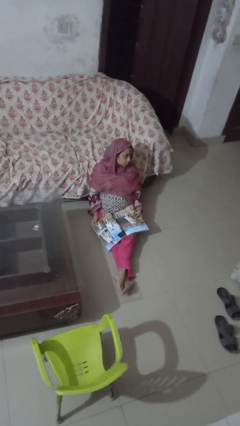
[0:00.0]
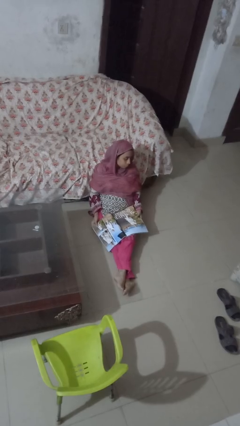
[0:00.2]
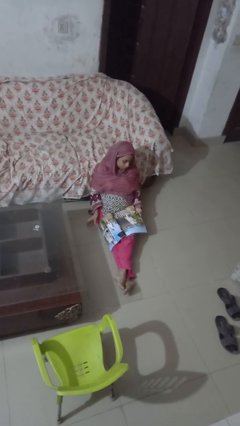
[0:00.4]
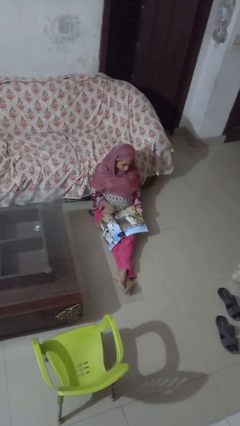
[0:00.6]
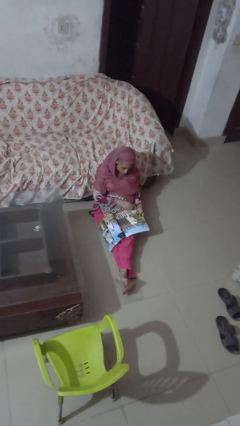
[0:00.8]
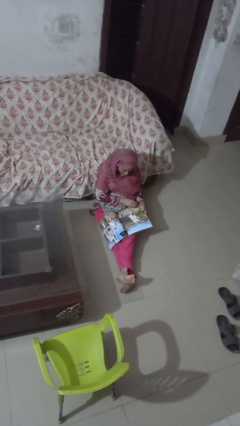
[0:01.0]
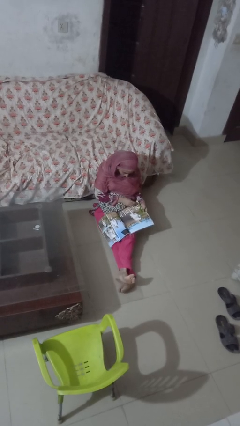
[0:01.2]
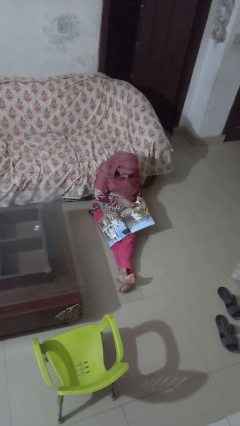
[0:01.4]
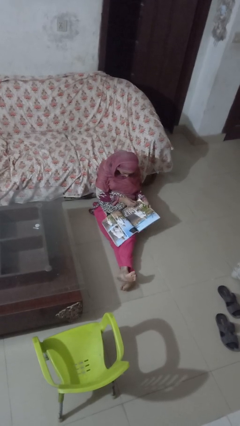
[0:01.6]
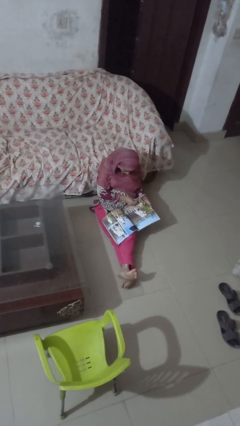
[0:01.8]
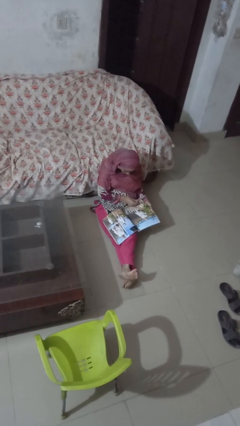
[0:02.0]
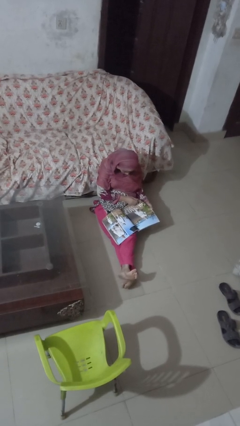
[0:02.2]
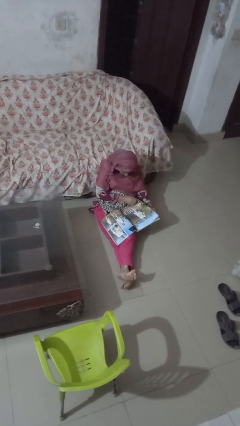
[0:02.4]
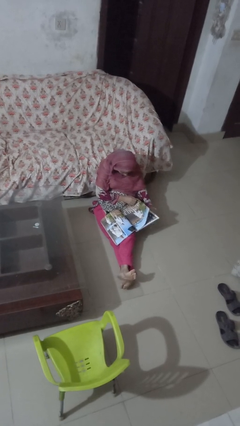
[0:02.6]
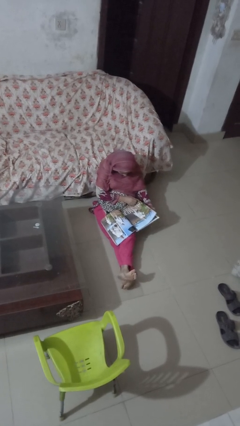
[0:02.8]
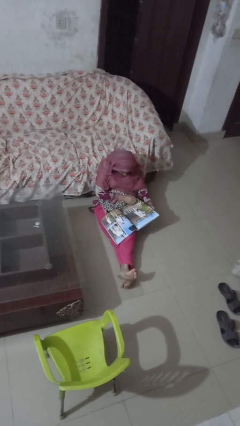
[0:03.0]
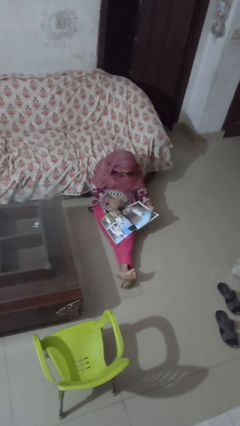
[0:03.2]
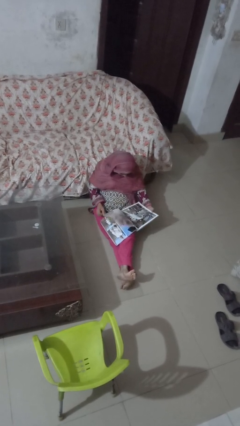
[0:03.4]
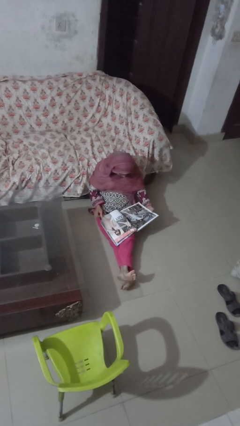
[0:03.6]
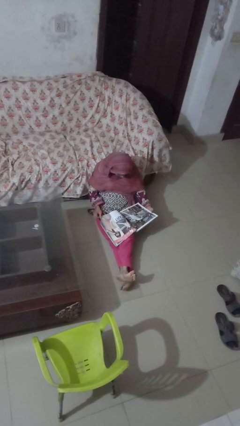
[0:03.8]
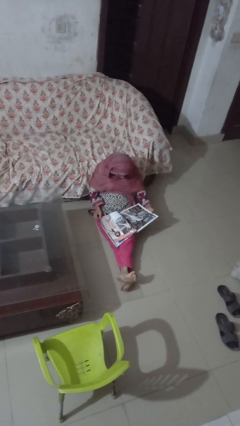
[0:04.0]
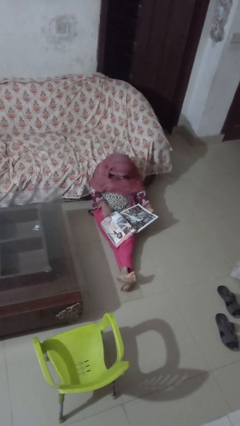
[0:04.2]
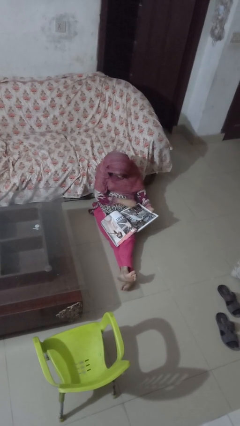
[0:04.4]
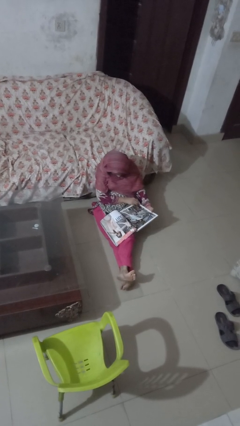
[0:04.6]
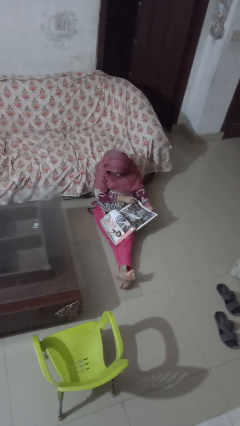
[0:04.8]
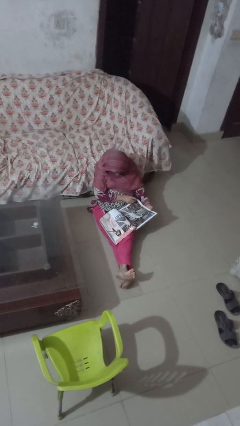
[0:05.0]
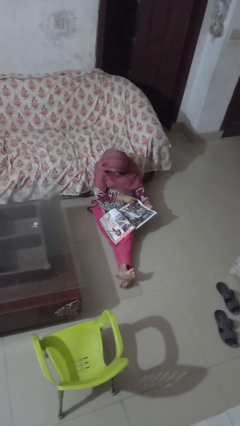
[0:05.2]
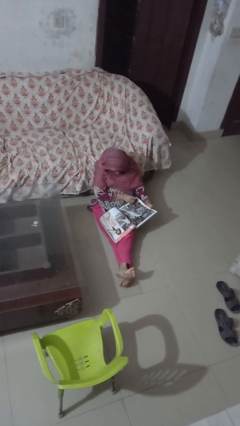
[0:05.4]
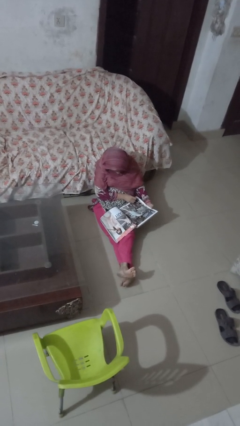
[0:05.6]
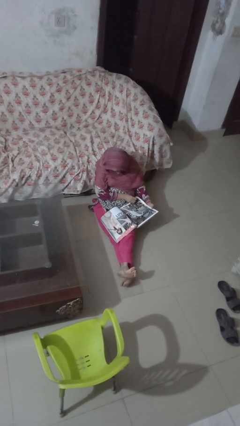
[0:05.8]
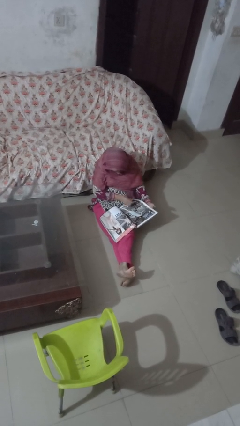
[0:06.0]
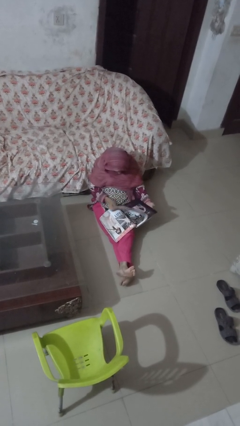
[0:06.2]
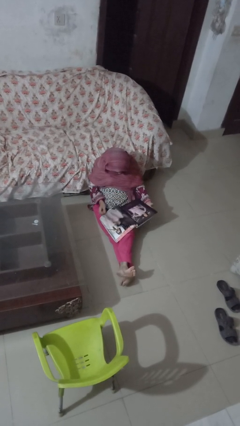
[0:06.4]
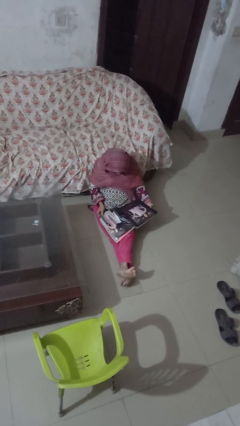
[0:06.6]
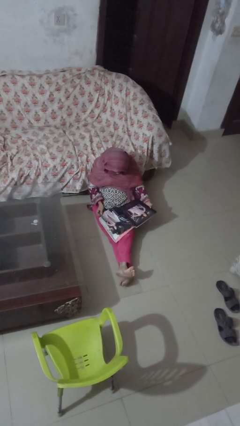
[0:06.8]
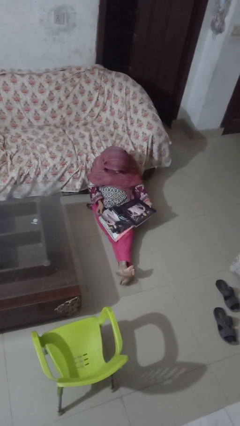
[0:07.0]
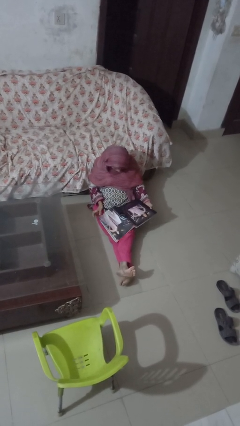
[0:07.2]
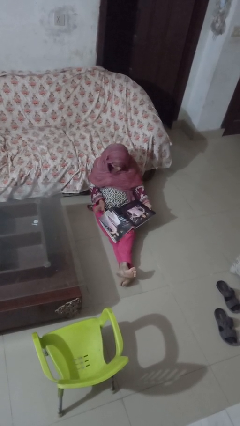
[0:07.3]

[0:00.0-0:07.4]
person reads magazine

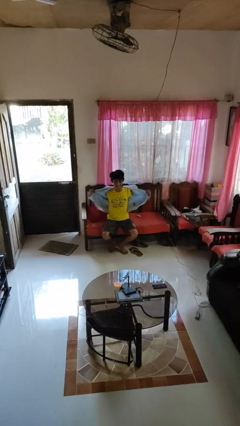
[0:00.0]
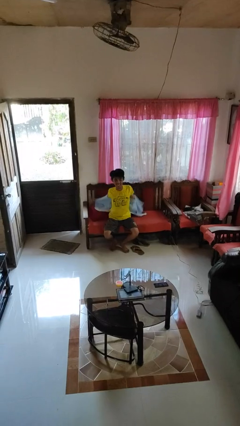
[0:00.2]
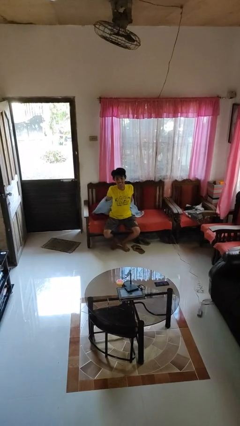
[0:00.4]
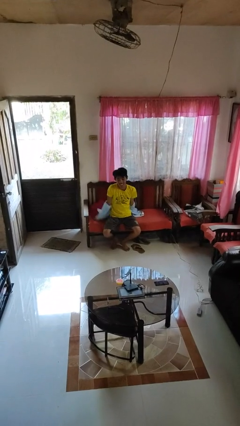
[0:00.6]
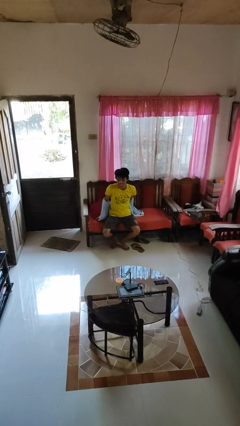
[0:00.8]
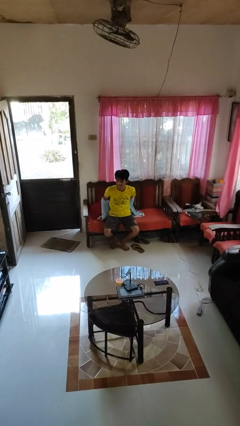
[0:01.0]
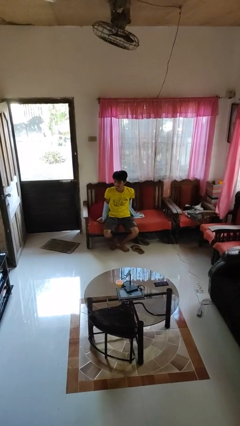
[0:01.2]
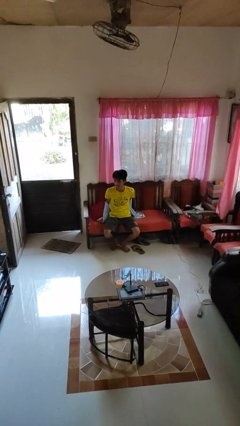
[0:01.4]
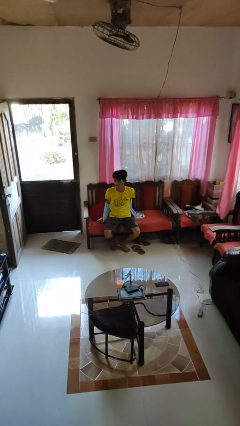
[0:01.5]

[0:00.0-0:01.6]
person takes off jacket

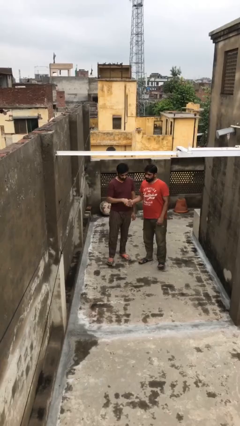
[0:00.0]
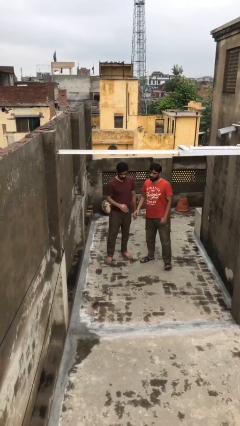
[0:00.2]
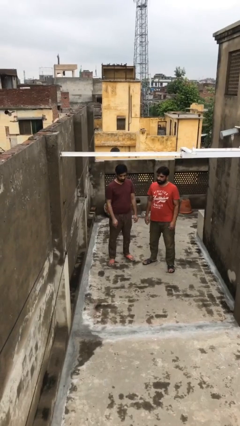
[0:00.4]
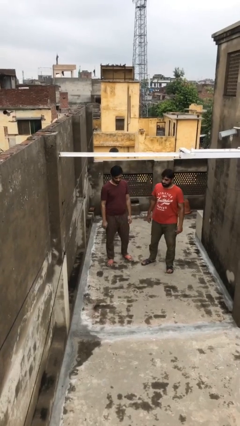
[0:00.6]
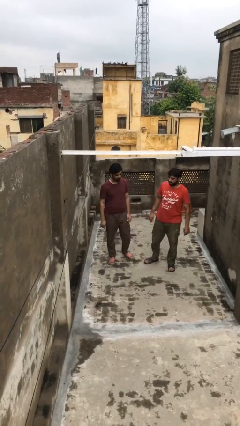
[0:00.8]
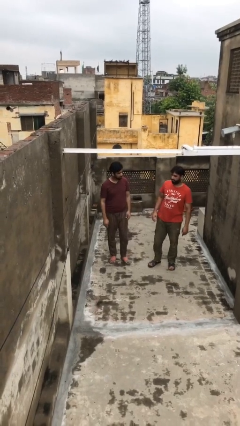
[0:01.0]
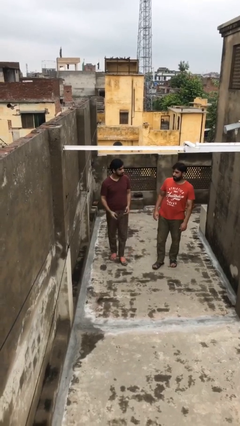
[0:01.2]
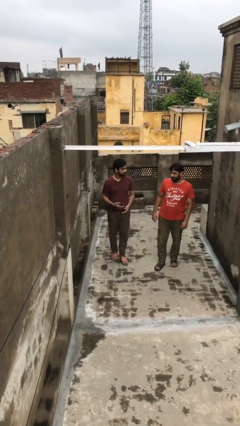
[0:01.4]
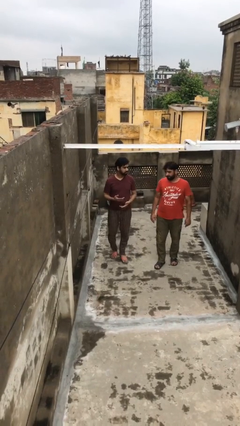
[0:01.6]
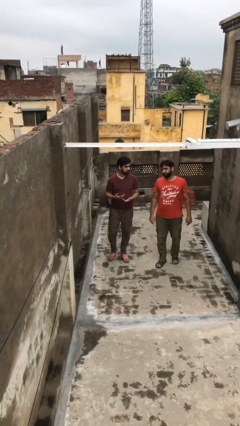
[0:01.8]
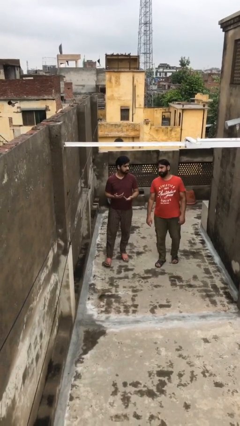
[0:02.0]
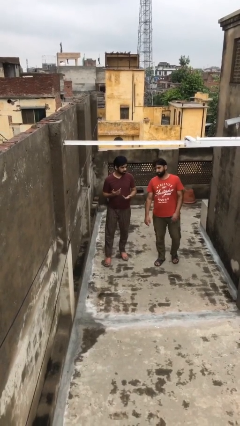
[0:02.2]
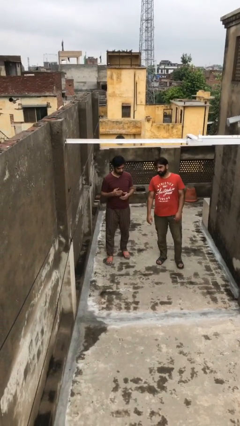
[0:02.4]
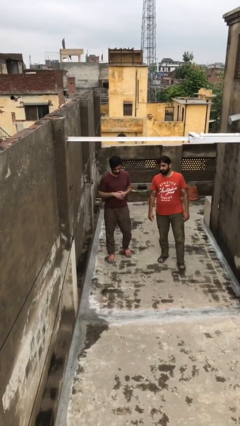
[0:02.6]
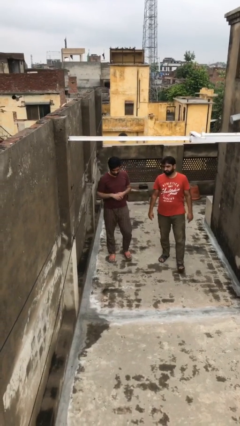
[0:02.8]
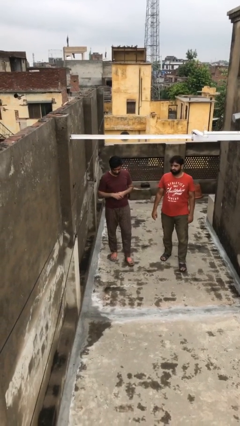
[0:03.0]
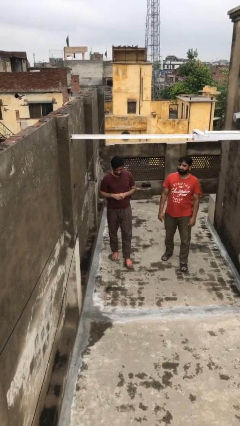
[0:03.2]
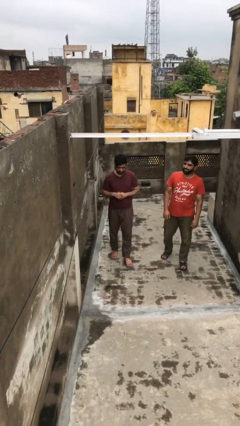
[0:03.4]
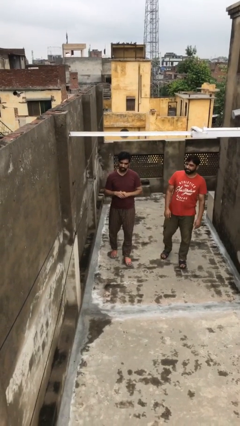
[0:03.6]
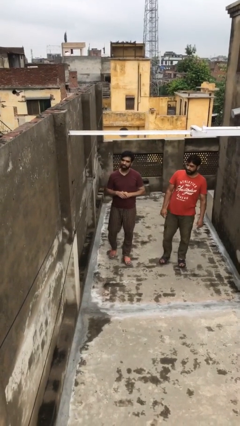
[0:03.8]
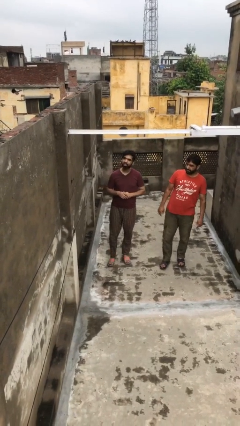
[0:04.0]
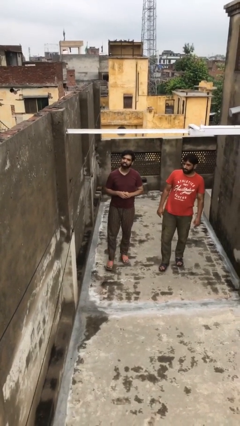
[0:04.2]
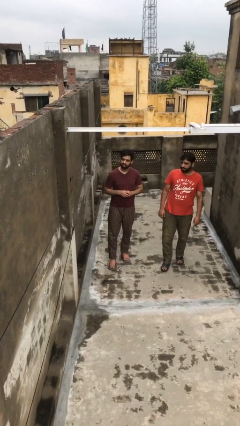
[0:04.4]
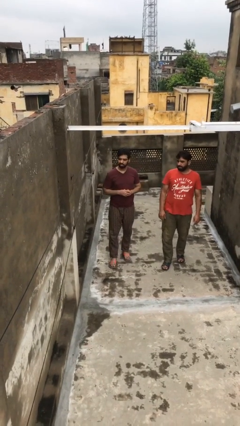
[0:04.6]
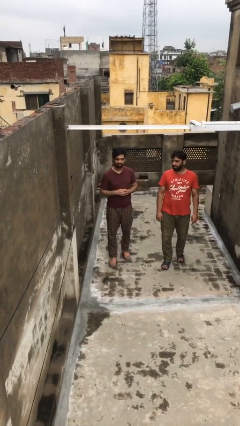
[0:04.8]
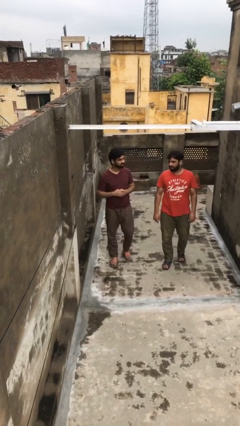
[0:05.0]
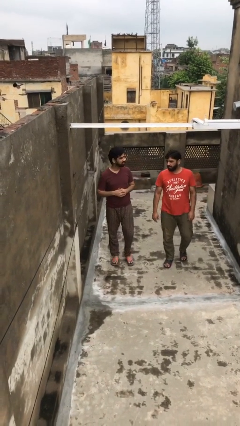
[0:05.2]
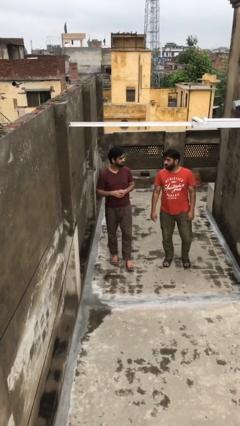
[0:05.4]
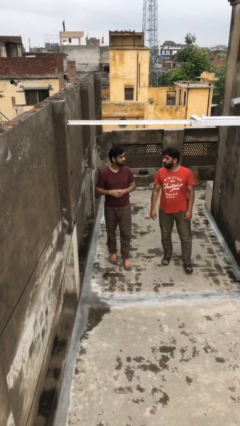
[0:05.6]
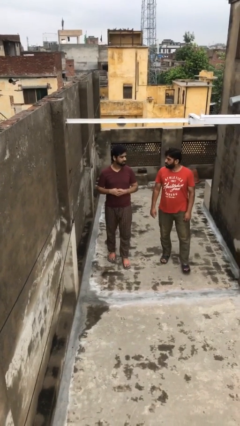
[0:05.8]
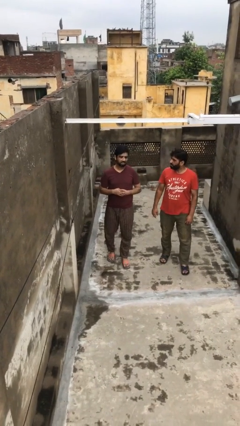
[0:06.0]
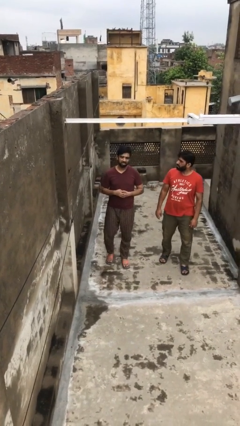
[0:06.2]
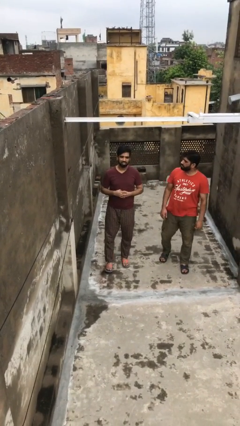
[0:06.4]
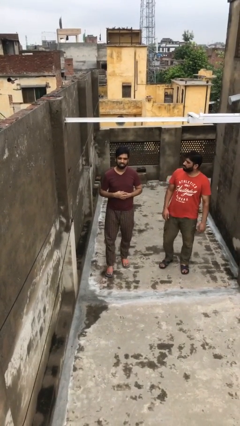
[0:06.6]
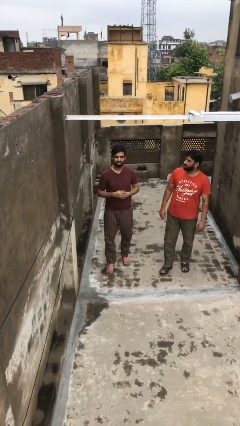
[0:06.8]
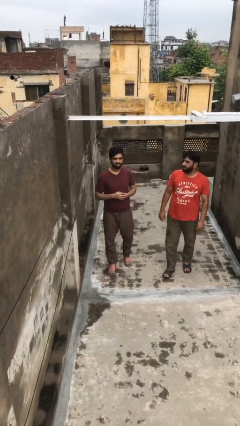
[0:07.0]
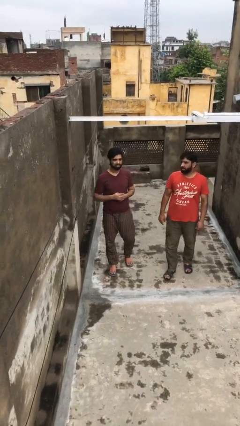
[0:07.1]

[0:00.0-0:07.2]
person talks to person

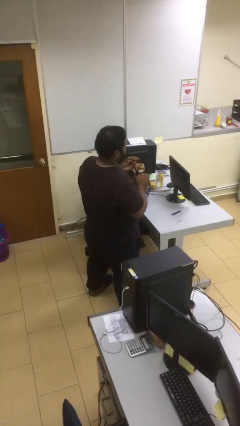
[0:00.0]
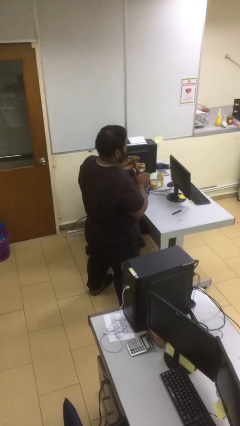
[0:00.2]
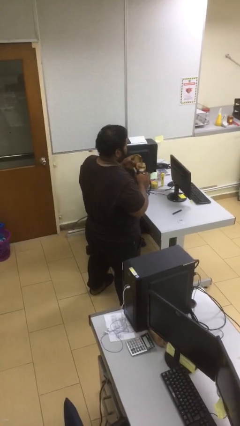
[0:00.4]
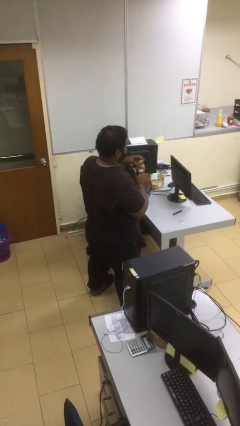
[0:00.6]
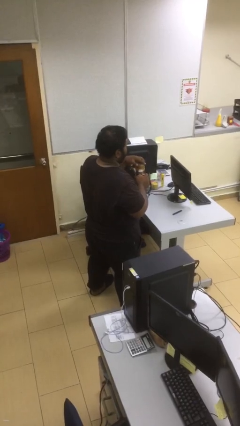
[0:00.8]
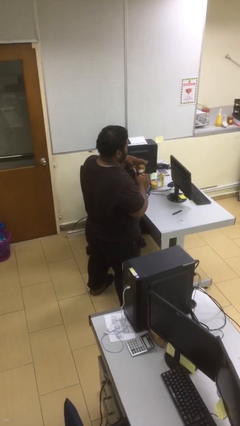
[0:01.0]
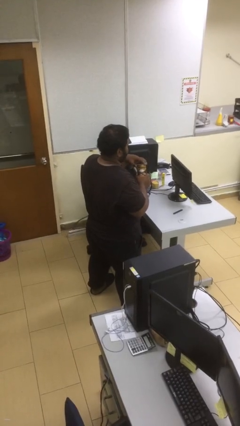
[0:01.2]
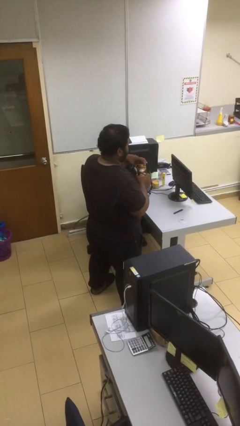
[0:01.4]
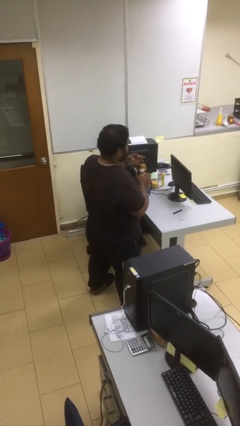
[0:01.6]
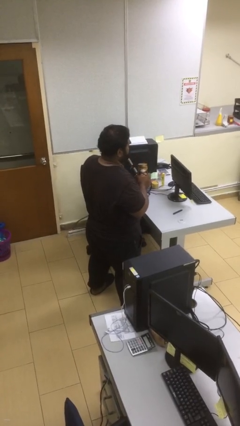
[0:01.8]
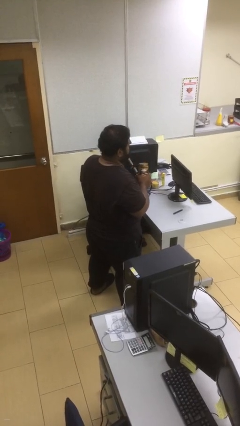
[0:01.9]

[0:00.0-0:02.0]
person closes jar

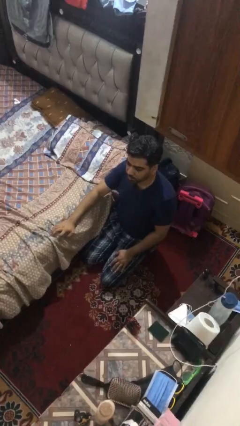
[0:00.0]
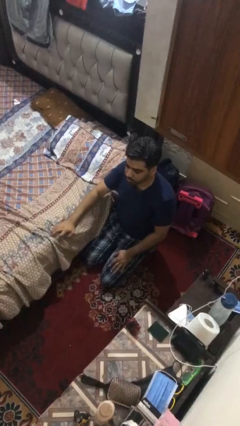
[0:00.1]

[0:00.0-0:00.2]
person searches under bed
